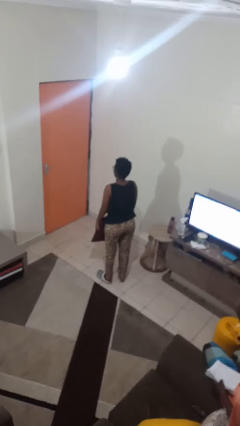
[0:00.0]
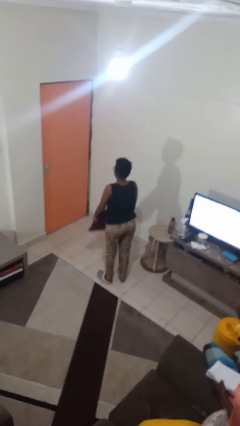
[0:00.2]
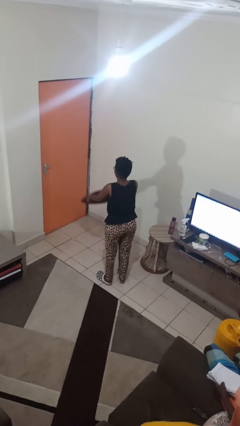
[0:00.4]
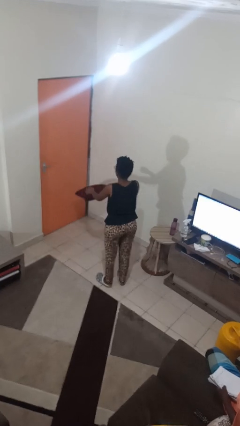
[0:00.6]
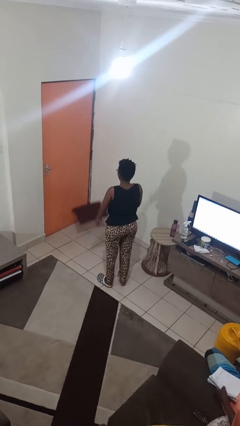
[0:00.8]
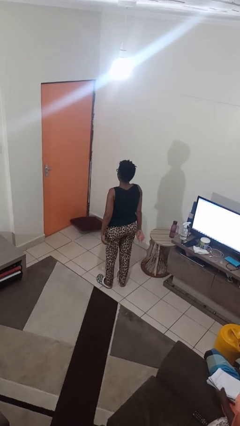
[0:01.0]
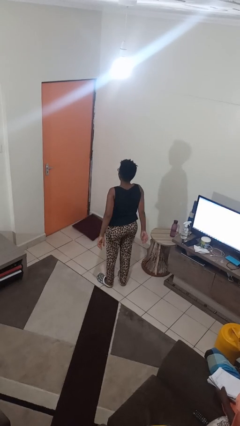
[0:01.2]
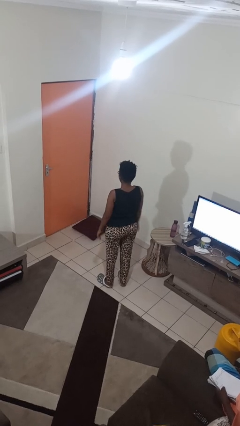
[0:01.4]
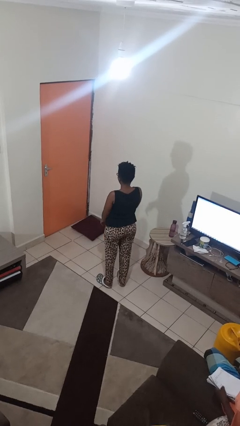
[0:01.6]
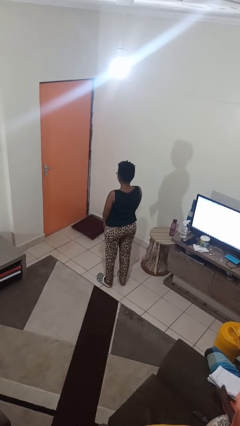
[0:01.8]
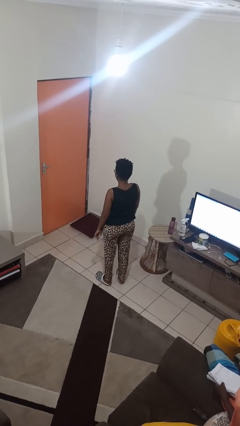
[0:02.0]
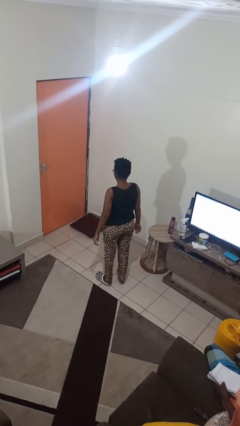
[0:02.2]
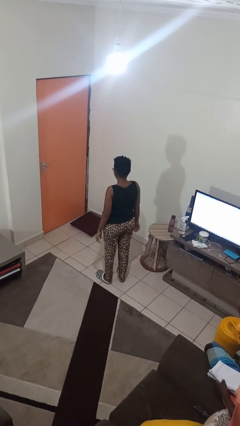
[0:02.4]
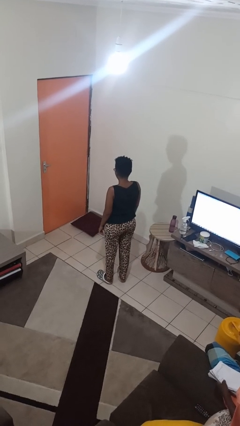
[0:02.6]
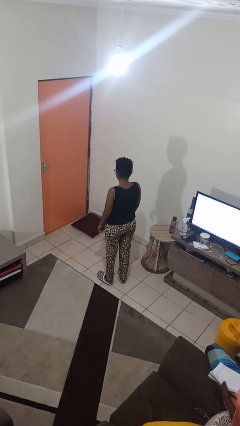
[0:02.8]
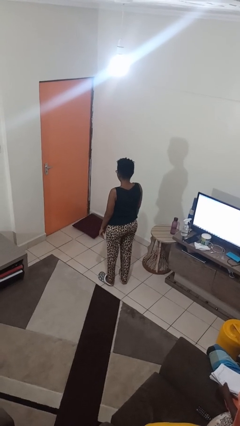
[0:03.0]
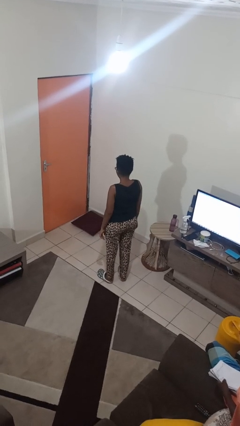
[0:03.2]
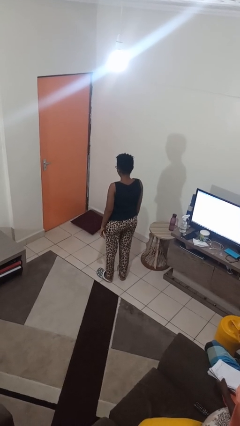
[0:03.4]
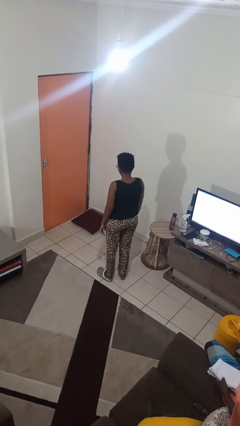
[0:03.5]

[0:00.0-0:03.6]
person throws object to ground

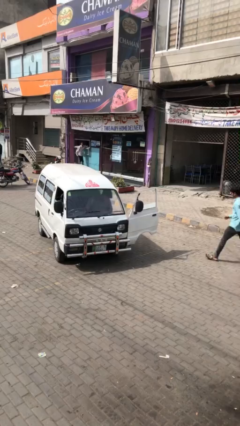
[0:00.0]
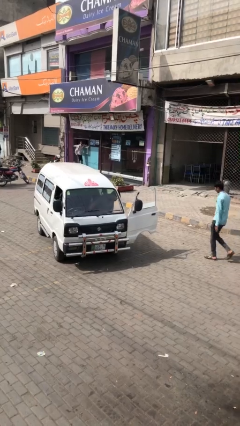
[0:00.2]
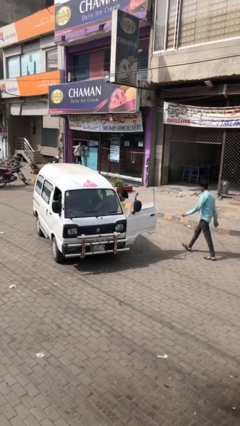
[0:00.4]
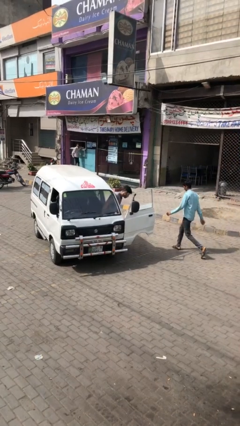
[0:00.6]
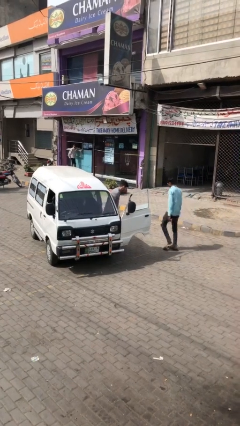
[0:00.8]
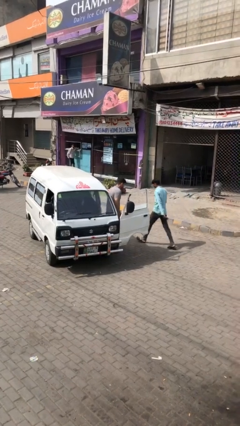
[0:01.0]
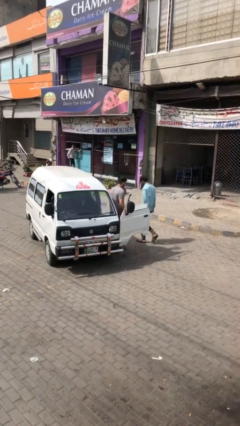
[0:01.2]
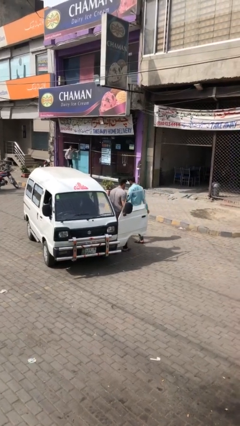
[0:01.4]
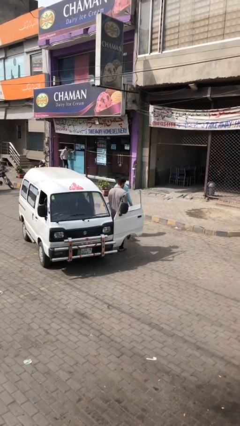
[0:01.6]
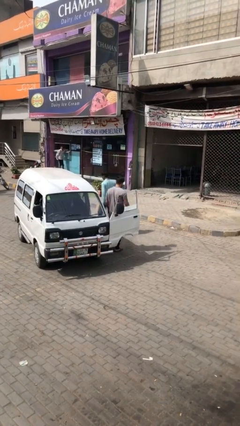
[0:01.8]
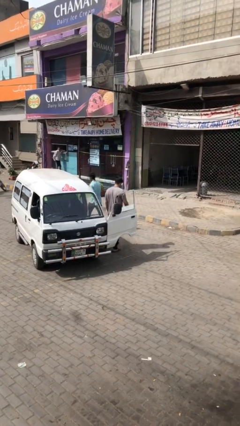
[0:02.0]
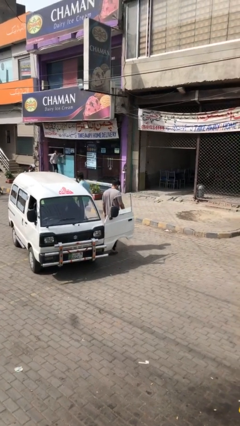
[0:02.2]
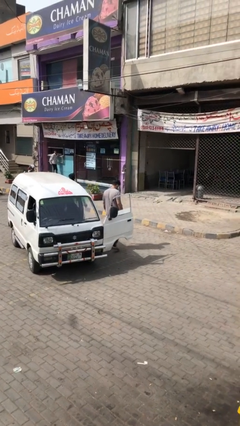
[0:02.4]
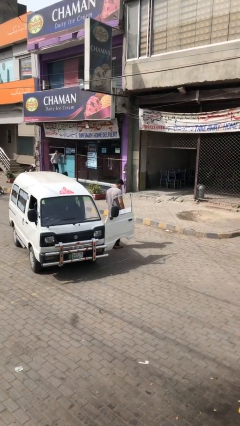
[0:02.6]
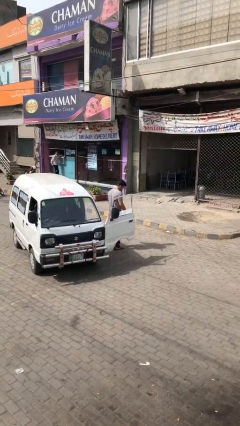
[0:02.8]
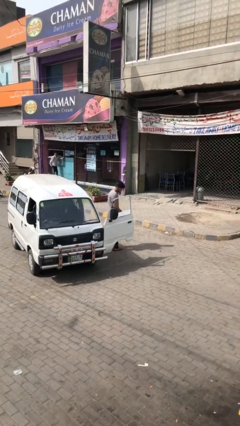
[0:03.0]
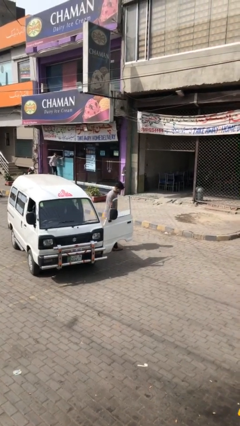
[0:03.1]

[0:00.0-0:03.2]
person exits car

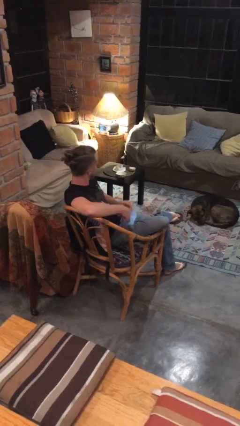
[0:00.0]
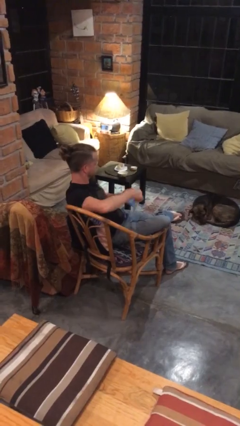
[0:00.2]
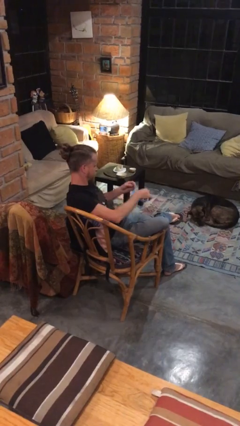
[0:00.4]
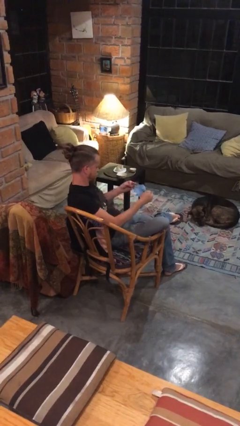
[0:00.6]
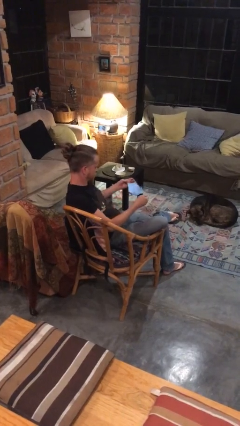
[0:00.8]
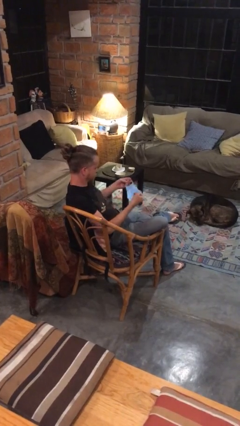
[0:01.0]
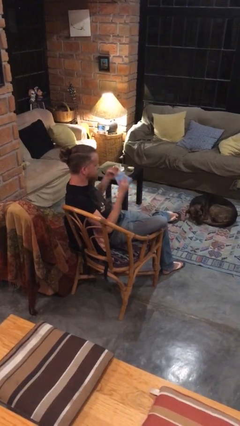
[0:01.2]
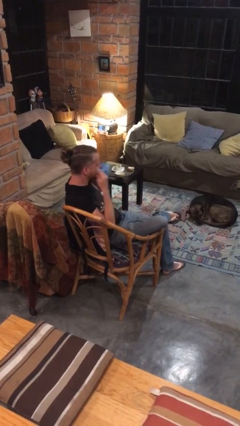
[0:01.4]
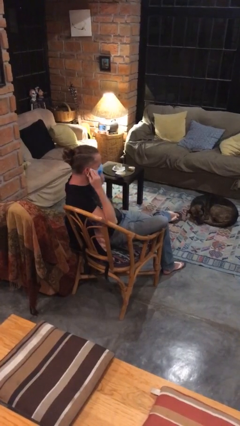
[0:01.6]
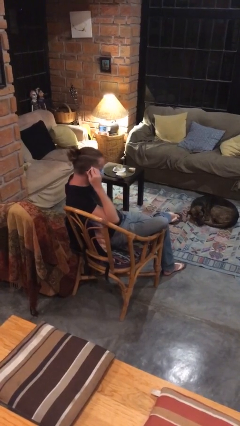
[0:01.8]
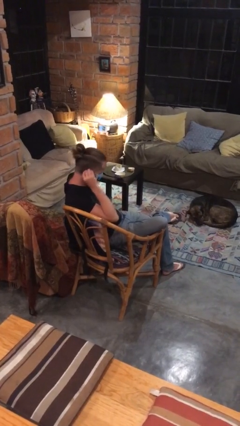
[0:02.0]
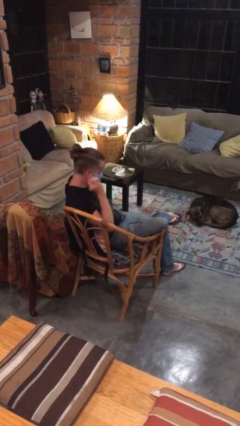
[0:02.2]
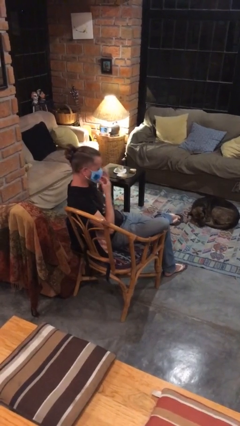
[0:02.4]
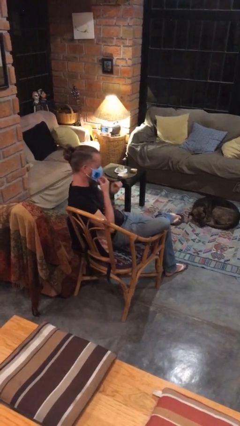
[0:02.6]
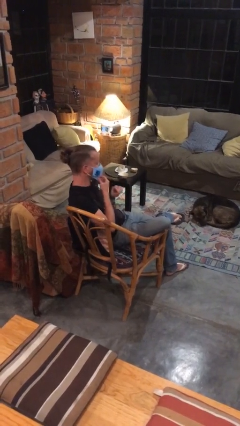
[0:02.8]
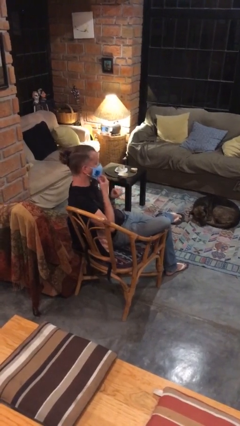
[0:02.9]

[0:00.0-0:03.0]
person puts on facemask

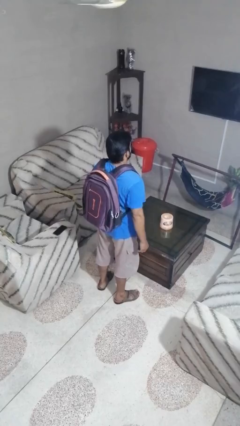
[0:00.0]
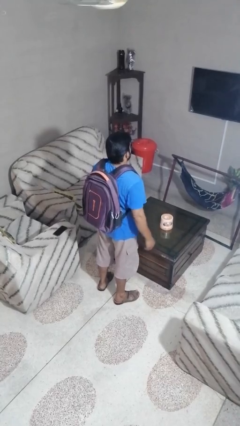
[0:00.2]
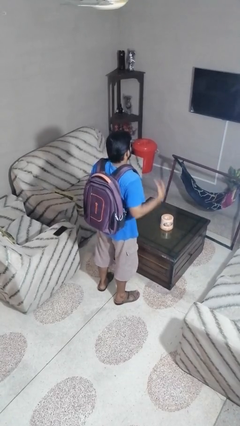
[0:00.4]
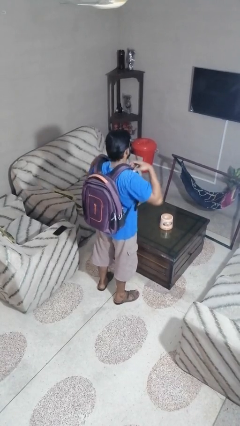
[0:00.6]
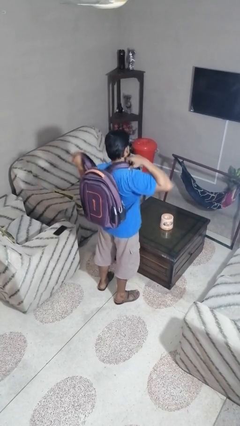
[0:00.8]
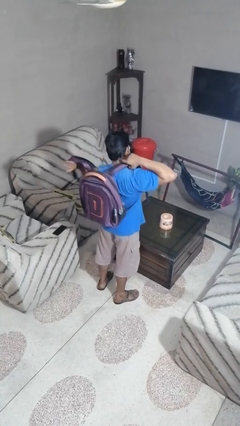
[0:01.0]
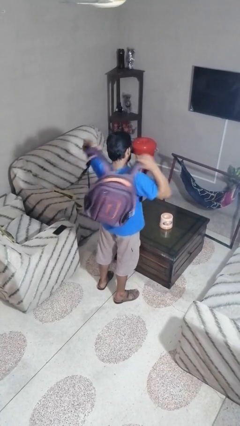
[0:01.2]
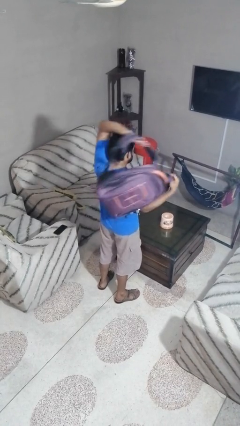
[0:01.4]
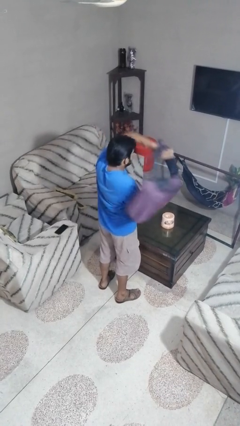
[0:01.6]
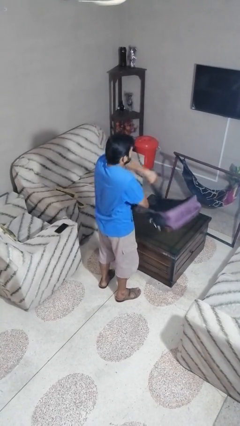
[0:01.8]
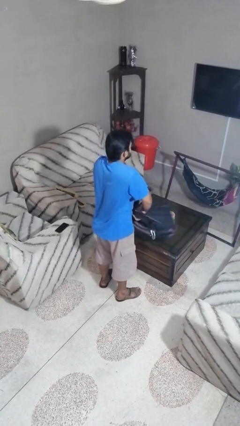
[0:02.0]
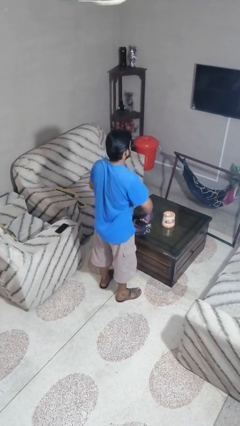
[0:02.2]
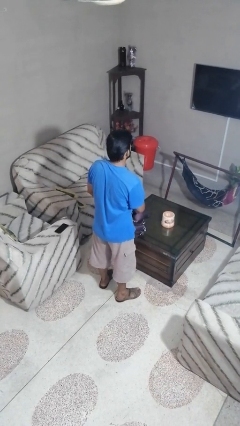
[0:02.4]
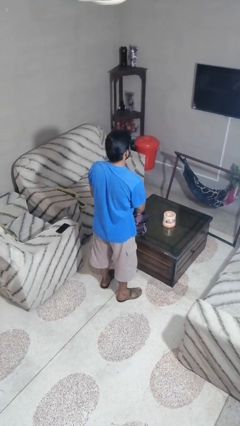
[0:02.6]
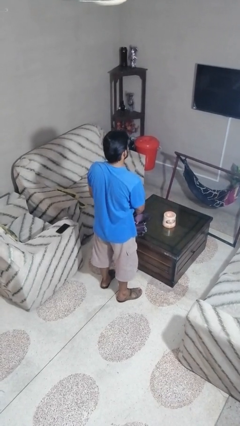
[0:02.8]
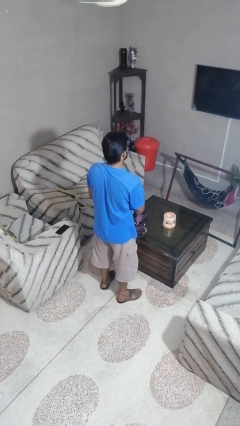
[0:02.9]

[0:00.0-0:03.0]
person takes off backpack

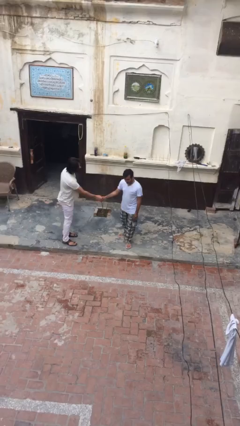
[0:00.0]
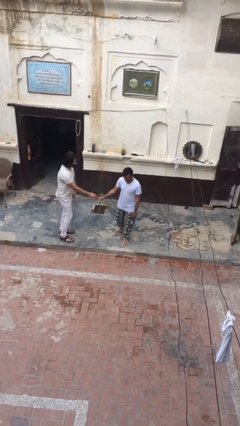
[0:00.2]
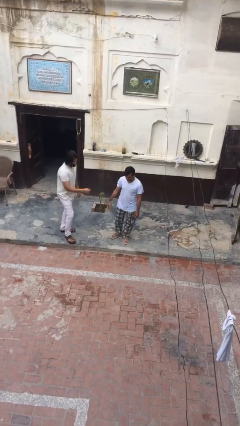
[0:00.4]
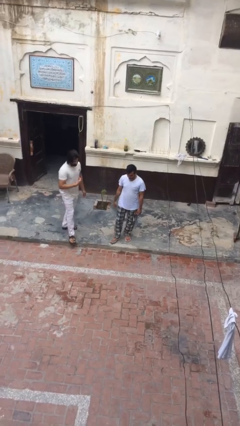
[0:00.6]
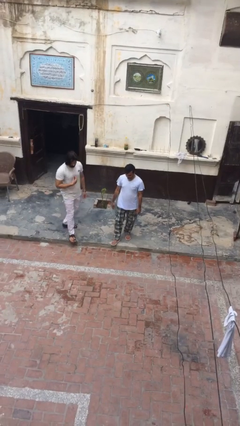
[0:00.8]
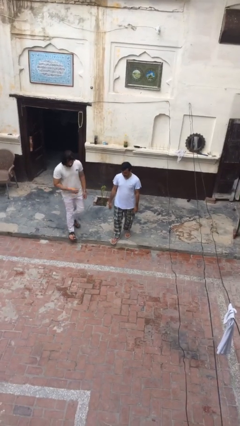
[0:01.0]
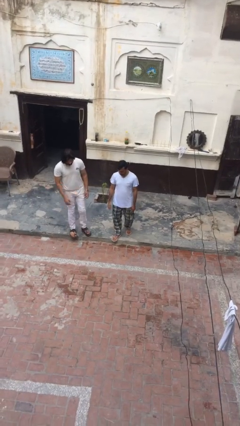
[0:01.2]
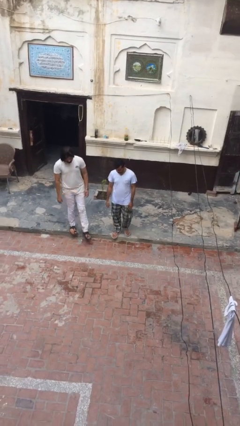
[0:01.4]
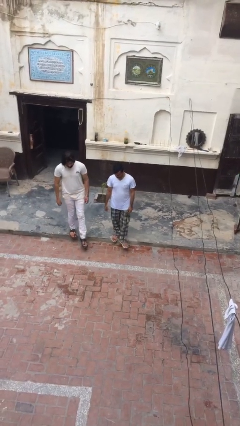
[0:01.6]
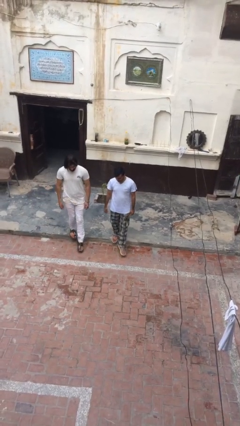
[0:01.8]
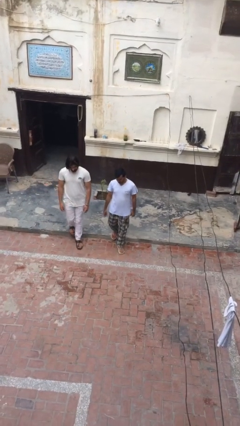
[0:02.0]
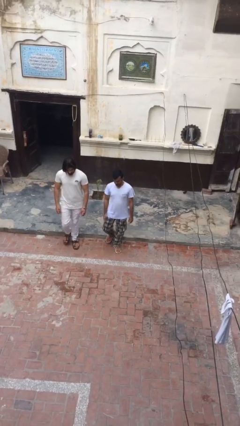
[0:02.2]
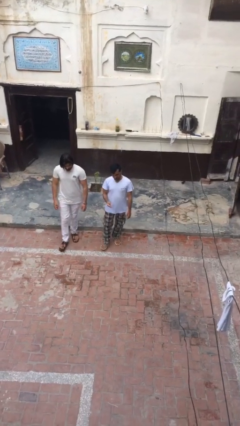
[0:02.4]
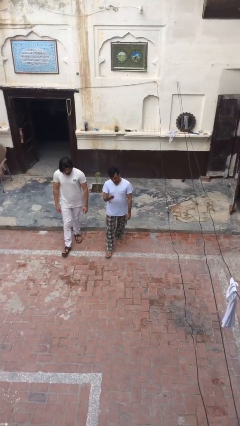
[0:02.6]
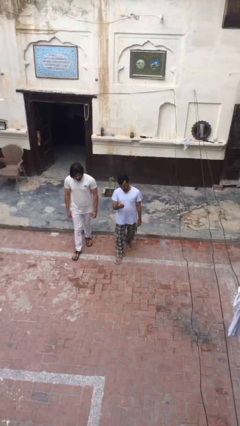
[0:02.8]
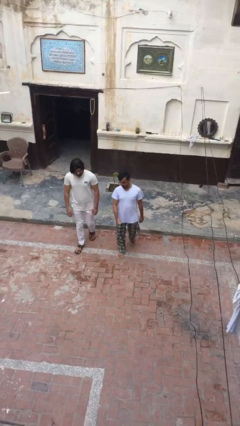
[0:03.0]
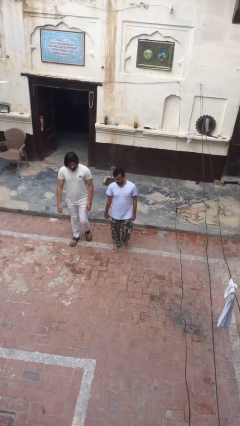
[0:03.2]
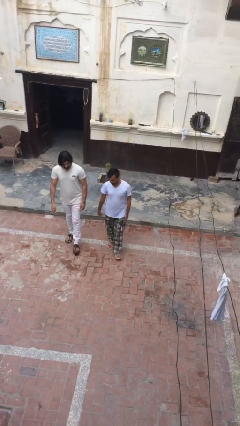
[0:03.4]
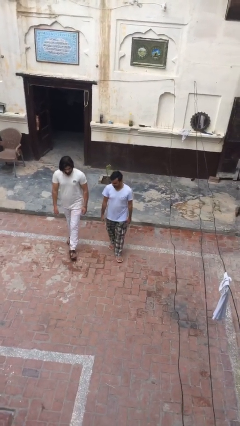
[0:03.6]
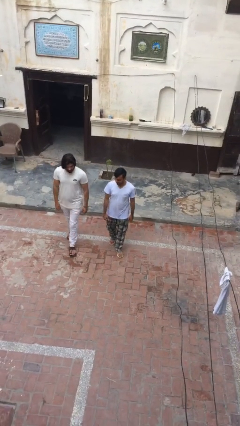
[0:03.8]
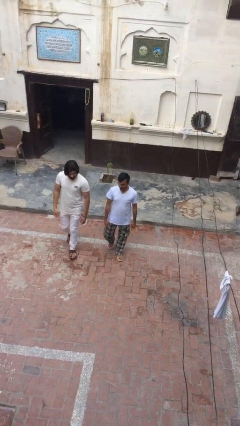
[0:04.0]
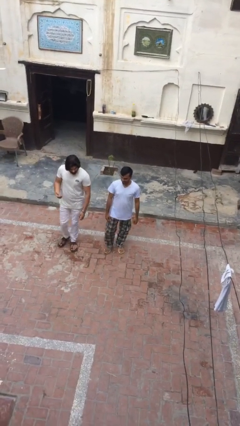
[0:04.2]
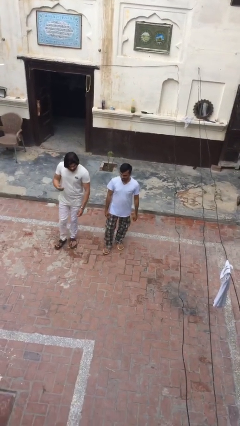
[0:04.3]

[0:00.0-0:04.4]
person talks to person
